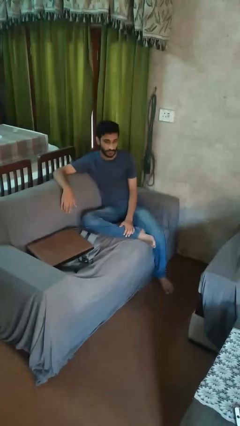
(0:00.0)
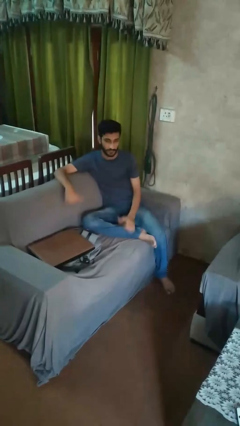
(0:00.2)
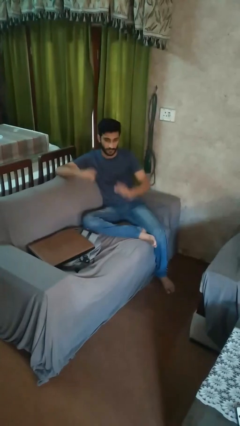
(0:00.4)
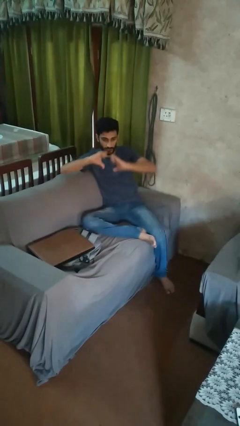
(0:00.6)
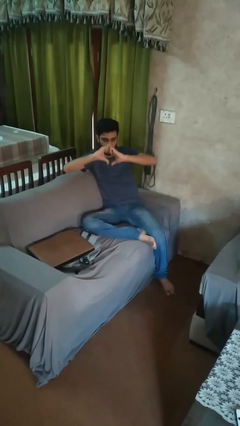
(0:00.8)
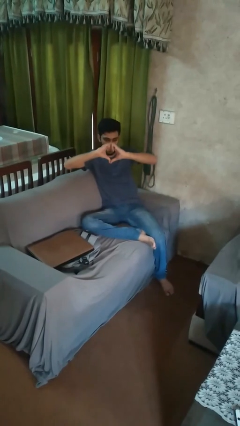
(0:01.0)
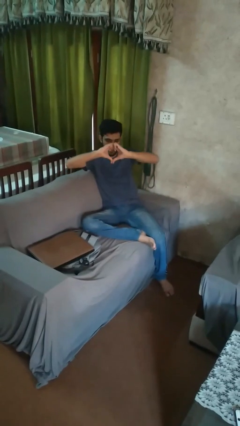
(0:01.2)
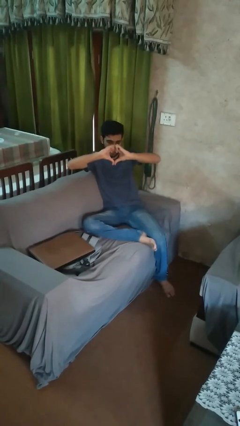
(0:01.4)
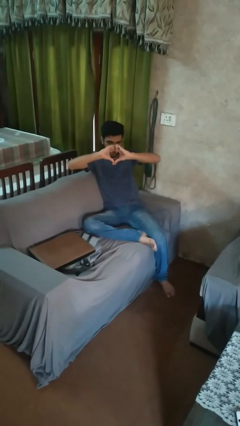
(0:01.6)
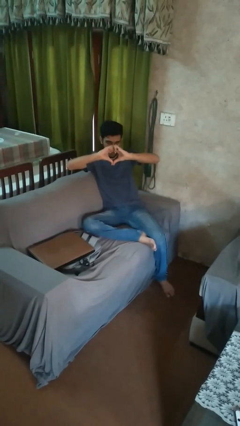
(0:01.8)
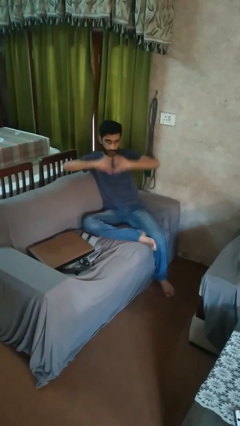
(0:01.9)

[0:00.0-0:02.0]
person gestures heart

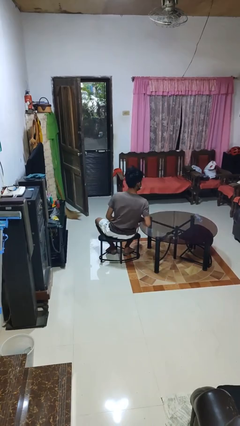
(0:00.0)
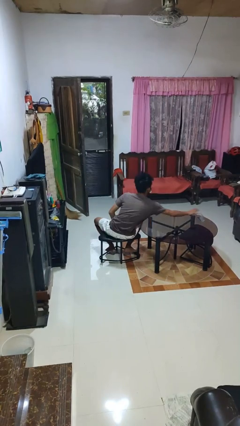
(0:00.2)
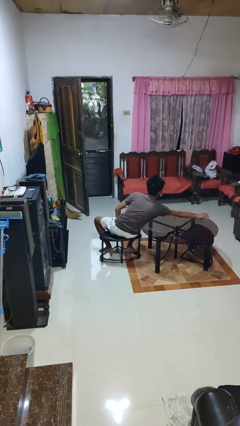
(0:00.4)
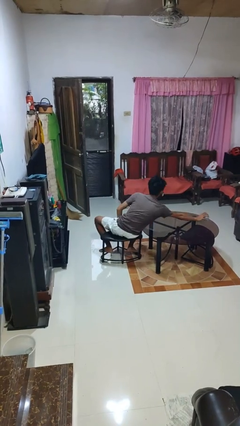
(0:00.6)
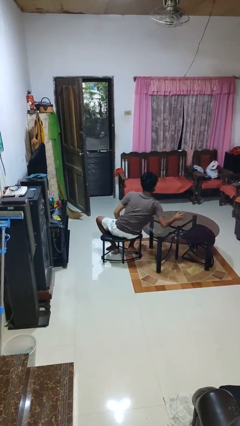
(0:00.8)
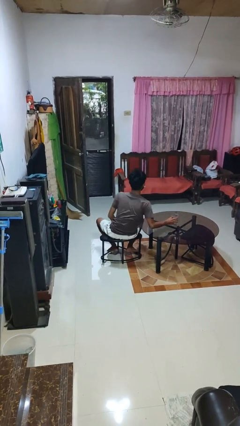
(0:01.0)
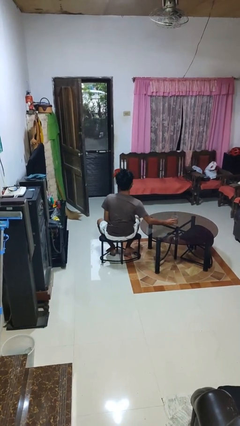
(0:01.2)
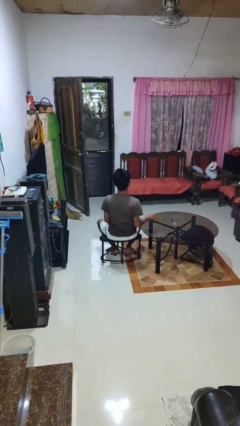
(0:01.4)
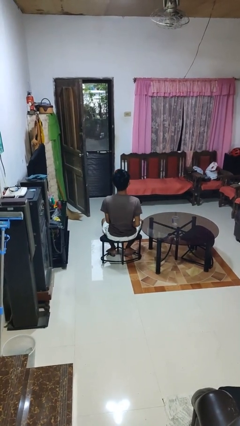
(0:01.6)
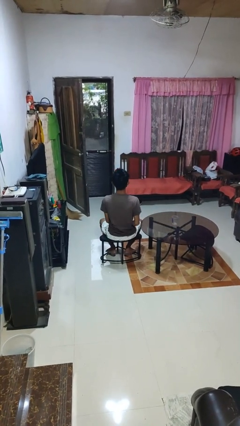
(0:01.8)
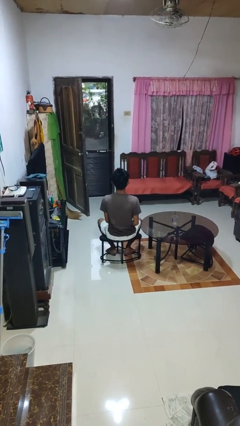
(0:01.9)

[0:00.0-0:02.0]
person sets upright glass

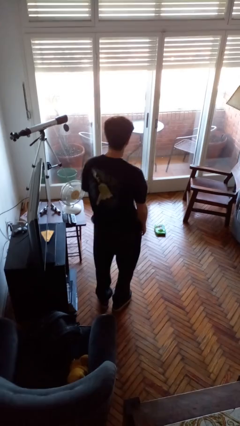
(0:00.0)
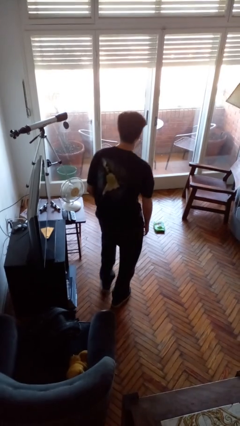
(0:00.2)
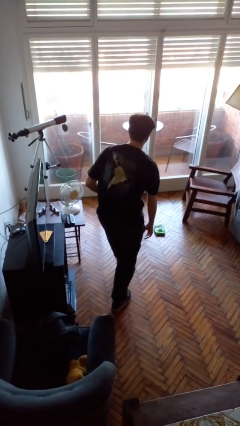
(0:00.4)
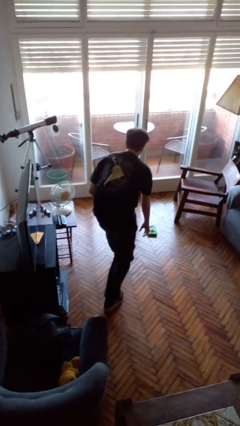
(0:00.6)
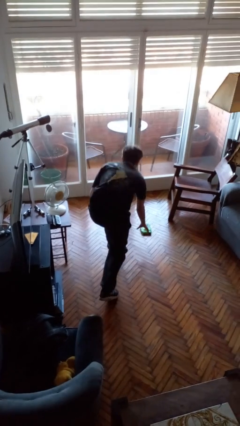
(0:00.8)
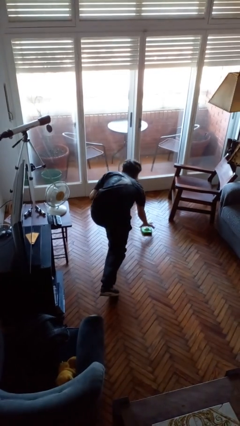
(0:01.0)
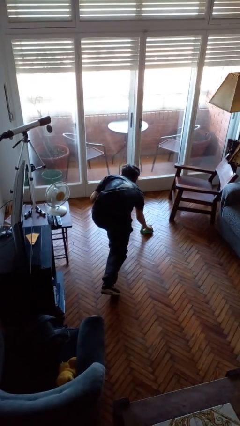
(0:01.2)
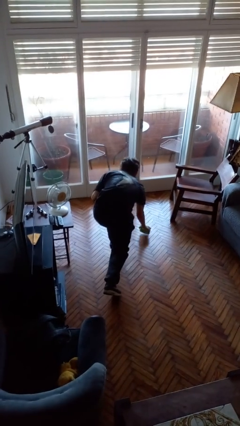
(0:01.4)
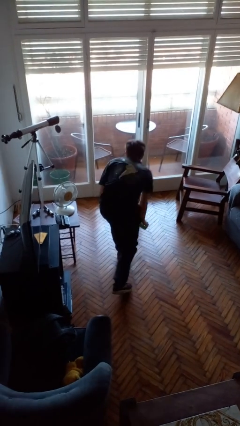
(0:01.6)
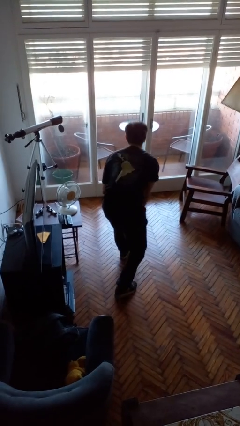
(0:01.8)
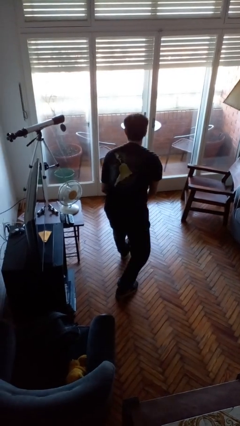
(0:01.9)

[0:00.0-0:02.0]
person picks up object from floor

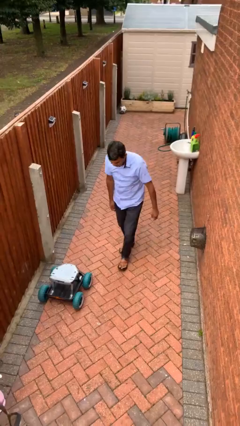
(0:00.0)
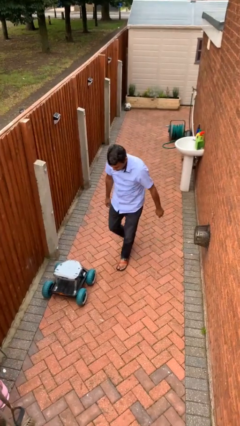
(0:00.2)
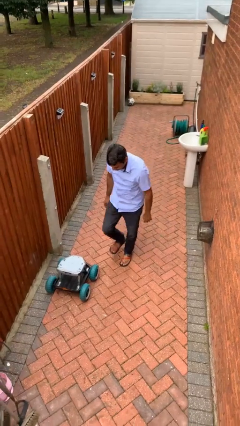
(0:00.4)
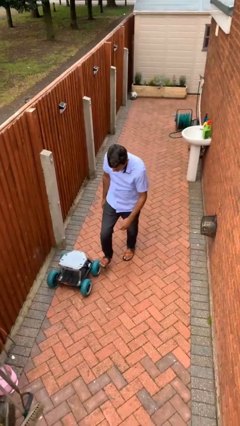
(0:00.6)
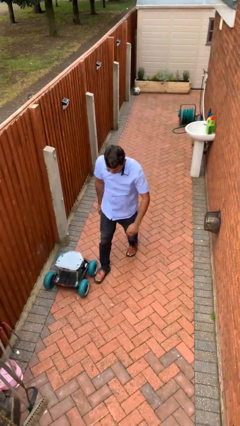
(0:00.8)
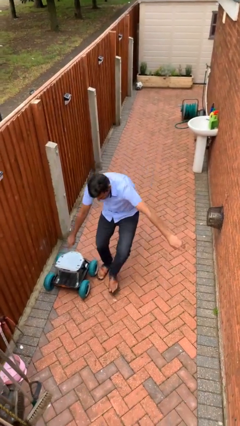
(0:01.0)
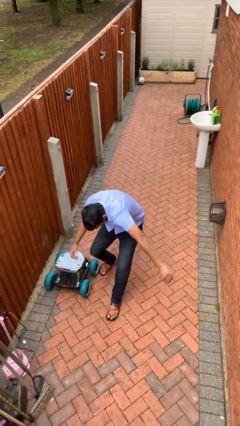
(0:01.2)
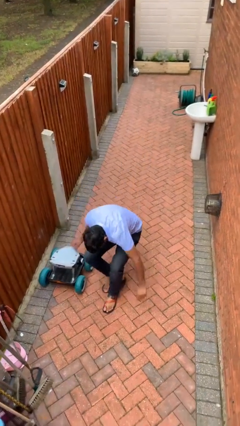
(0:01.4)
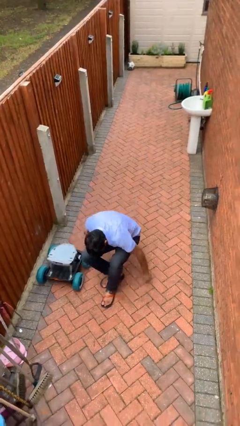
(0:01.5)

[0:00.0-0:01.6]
person trips on object on floor

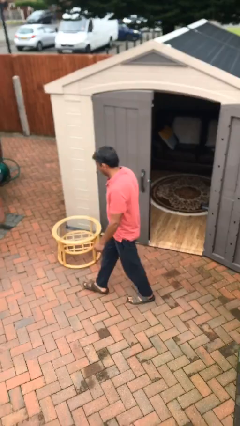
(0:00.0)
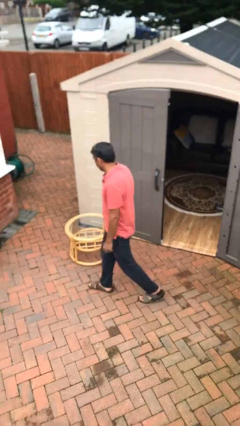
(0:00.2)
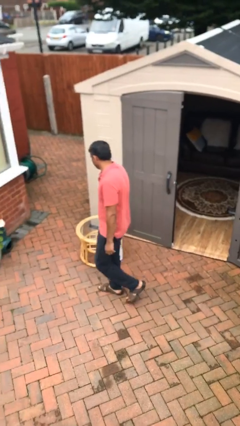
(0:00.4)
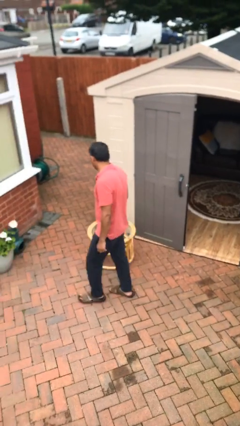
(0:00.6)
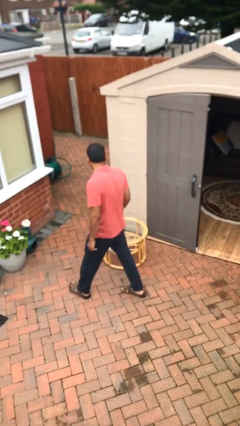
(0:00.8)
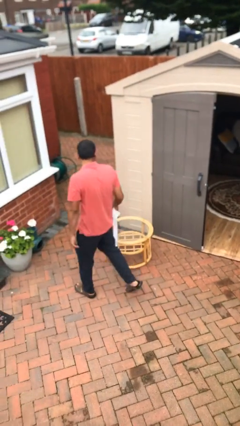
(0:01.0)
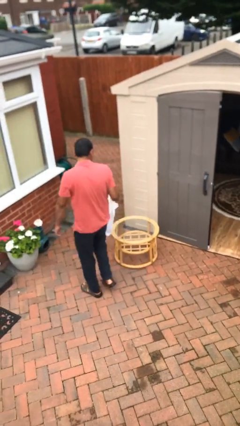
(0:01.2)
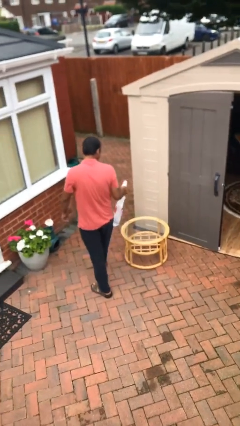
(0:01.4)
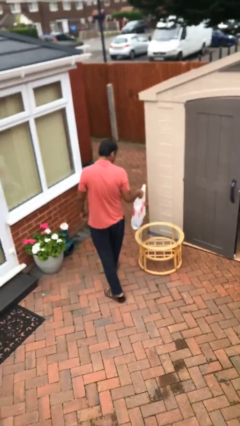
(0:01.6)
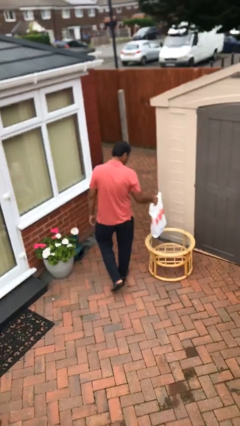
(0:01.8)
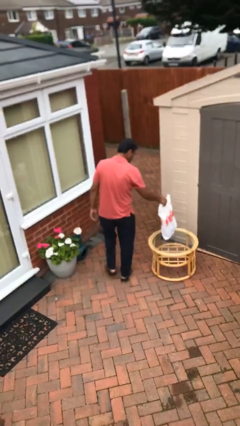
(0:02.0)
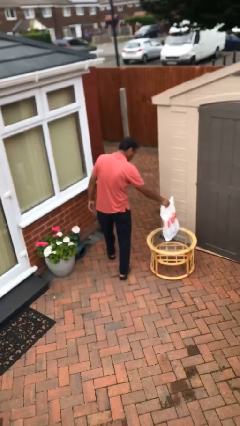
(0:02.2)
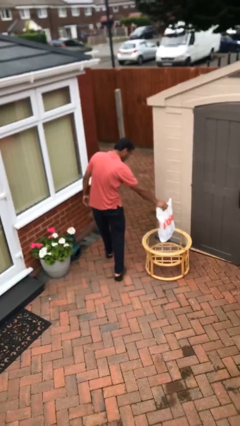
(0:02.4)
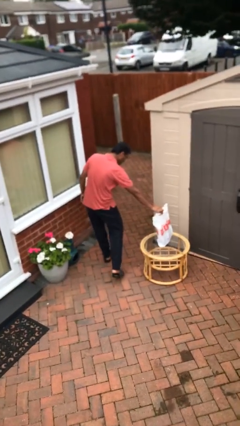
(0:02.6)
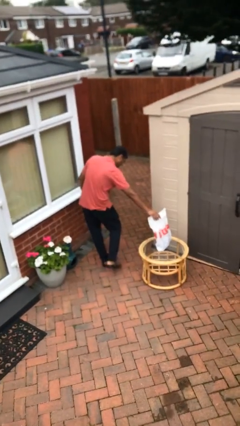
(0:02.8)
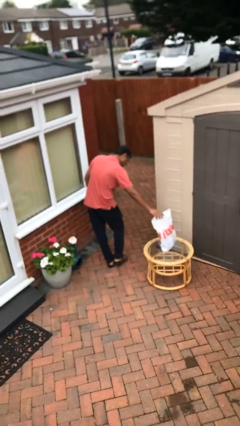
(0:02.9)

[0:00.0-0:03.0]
person puts down object on table

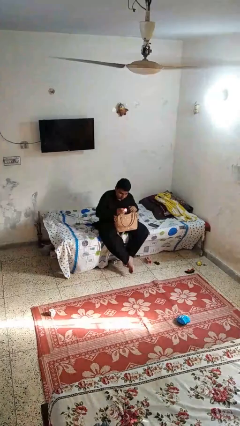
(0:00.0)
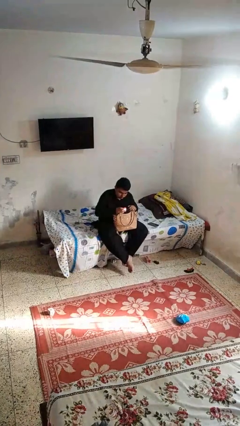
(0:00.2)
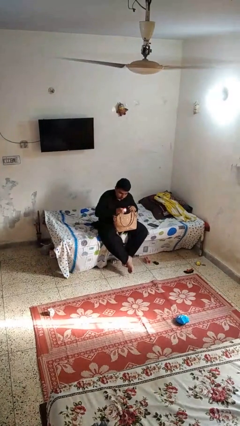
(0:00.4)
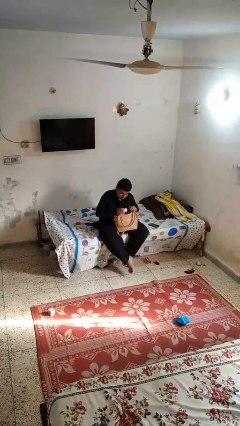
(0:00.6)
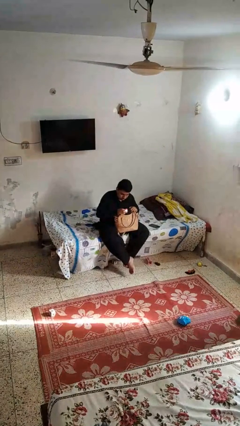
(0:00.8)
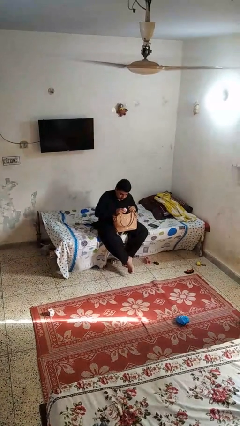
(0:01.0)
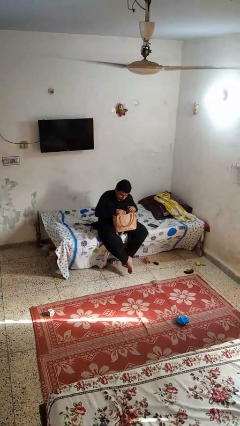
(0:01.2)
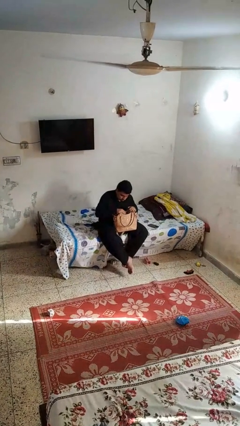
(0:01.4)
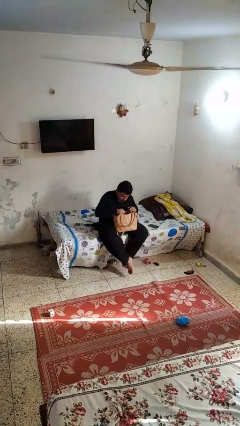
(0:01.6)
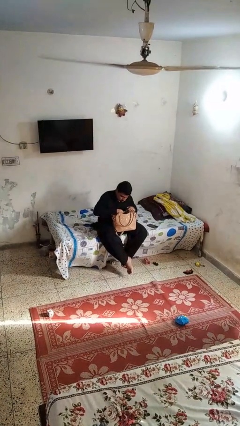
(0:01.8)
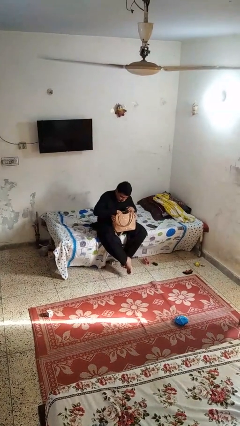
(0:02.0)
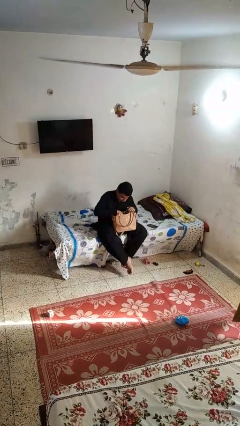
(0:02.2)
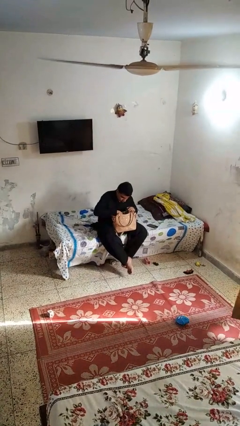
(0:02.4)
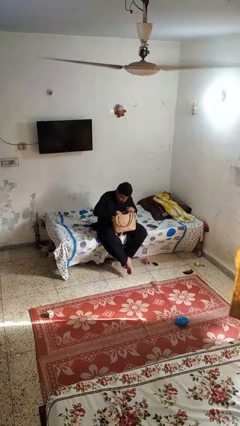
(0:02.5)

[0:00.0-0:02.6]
person puts object into purse

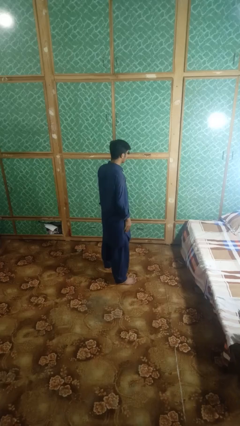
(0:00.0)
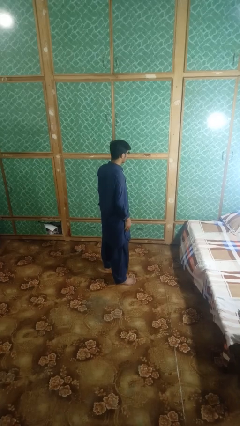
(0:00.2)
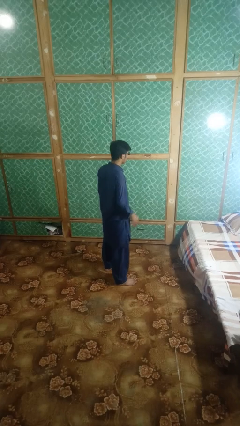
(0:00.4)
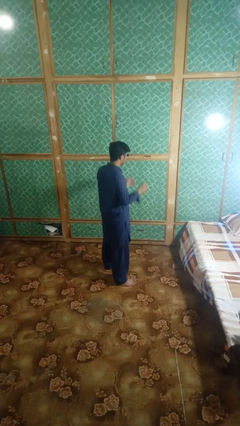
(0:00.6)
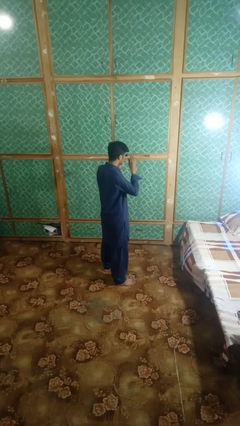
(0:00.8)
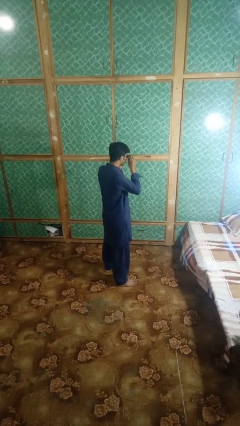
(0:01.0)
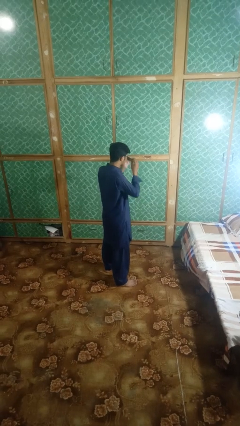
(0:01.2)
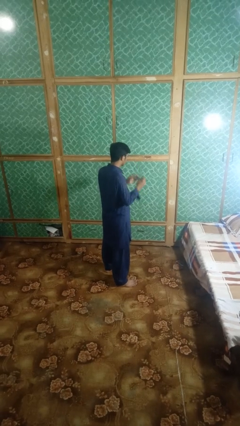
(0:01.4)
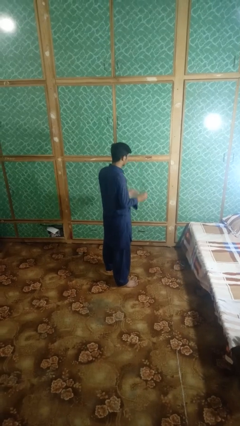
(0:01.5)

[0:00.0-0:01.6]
person takes off sunglasses

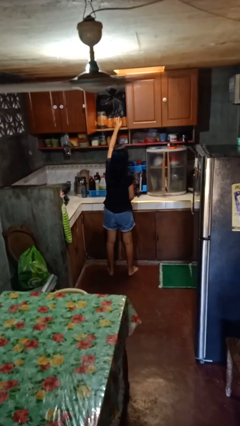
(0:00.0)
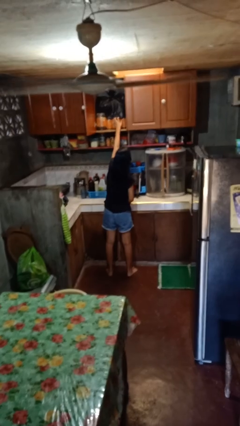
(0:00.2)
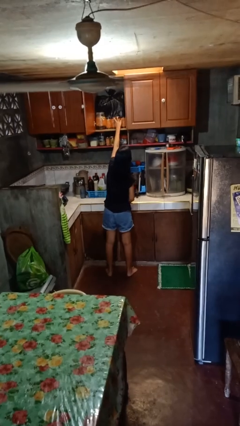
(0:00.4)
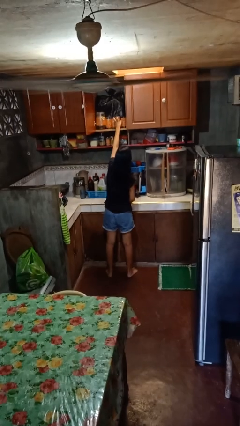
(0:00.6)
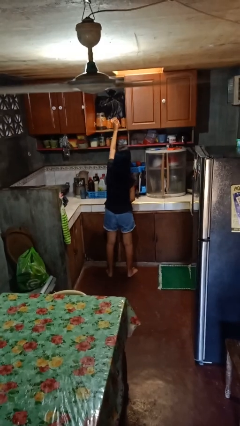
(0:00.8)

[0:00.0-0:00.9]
person picks up object from cabinet

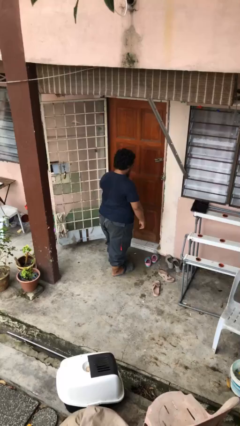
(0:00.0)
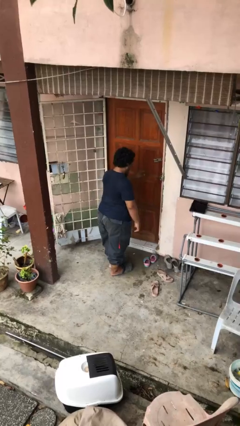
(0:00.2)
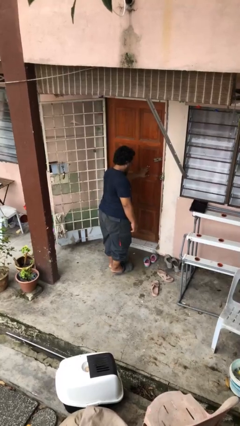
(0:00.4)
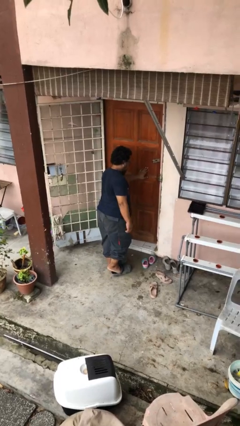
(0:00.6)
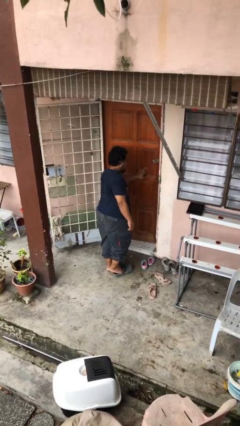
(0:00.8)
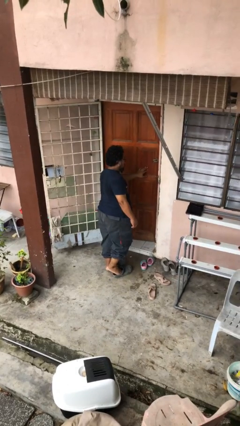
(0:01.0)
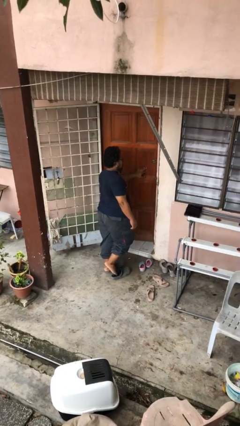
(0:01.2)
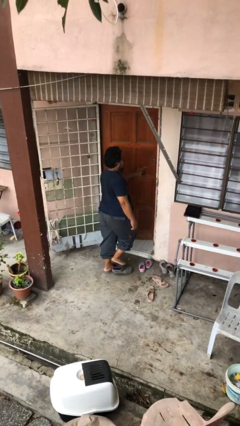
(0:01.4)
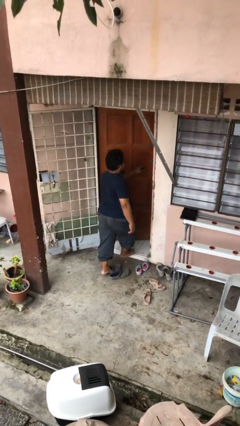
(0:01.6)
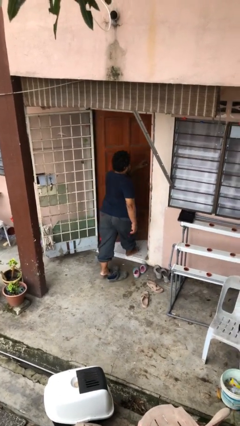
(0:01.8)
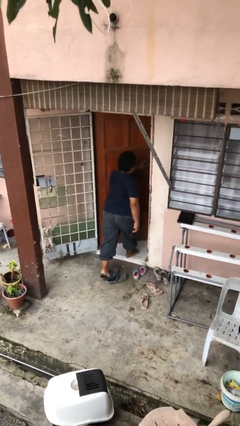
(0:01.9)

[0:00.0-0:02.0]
person opens facility door
